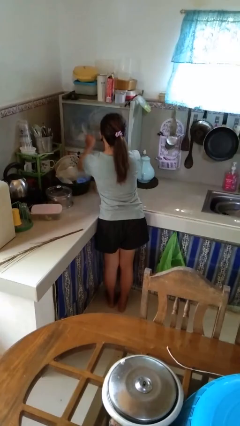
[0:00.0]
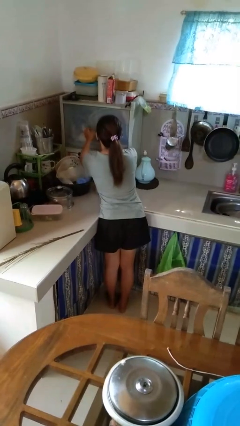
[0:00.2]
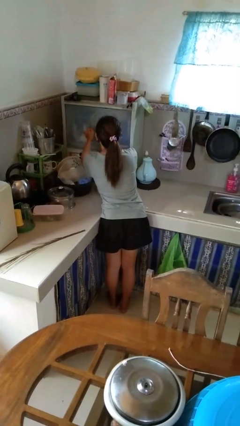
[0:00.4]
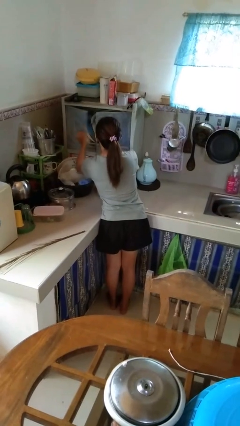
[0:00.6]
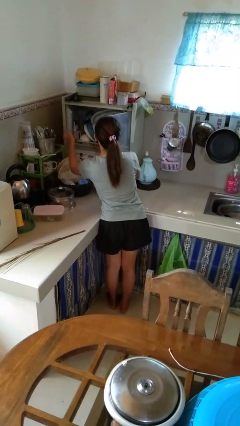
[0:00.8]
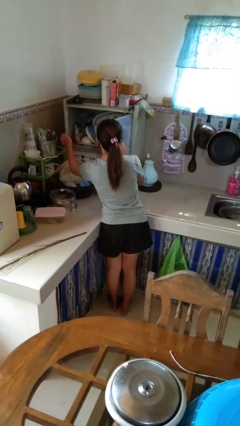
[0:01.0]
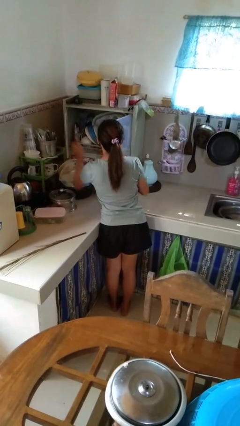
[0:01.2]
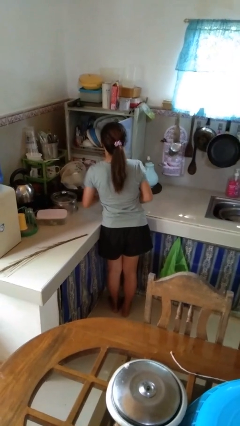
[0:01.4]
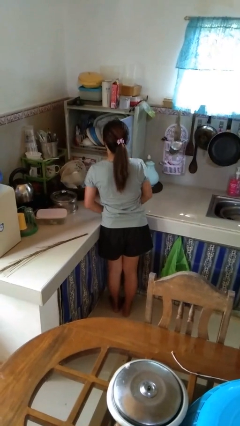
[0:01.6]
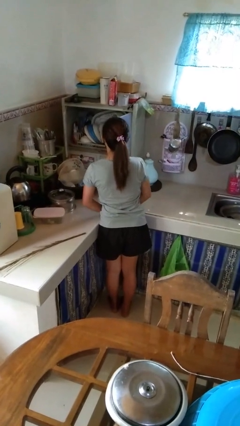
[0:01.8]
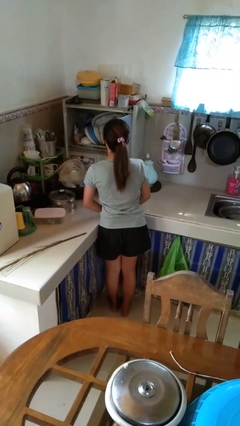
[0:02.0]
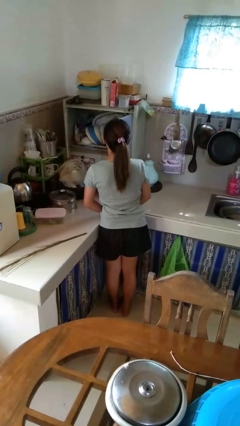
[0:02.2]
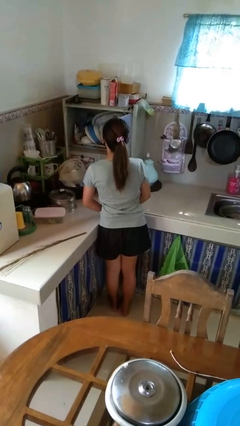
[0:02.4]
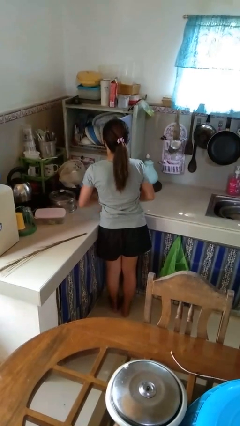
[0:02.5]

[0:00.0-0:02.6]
person opens kitchen drawer

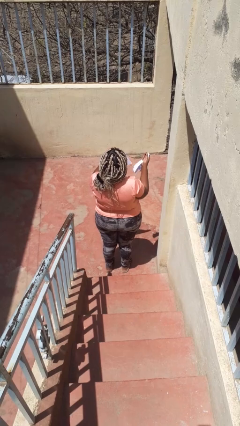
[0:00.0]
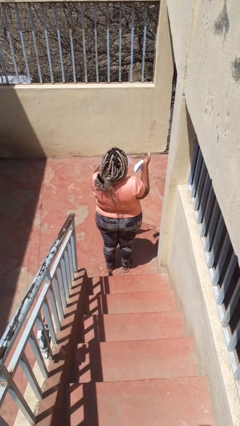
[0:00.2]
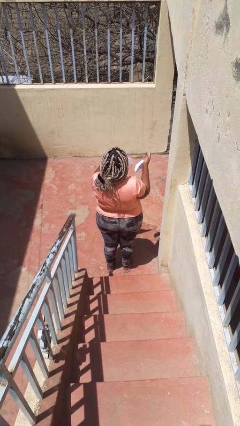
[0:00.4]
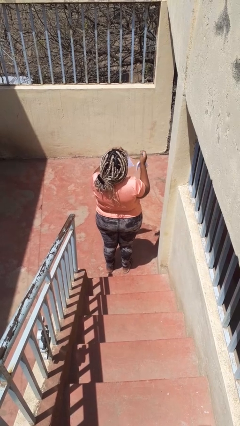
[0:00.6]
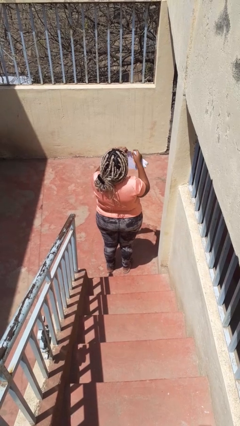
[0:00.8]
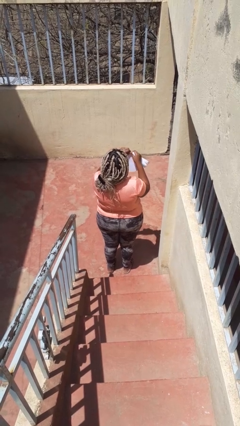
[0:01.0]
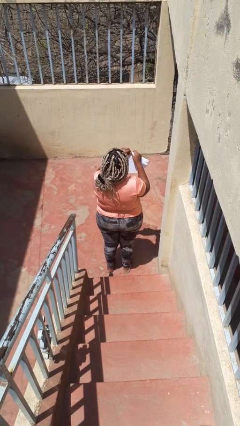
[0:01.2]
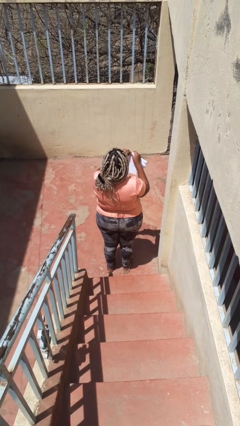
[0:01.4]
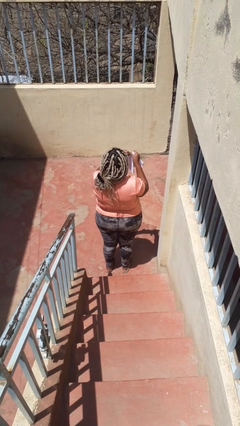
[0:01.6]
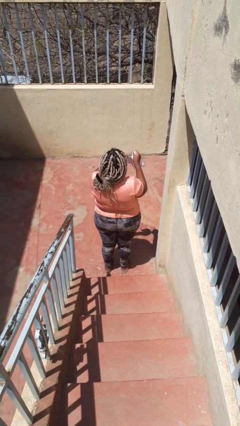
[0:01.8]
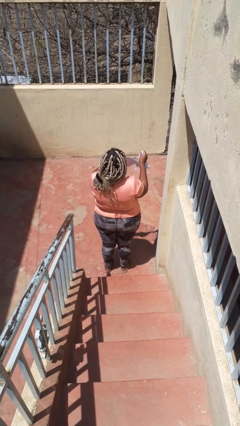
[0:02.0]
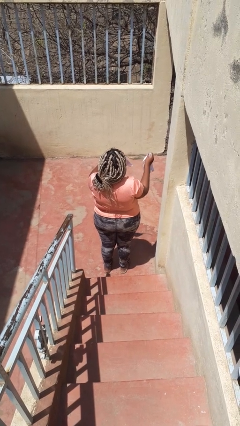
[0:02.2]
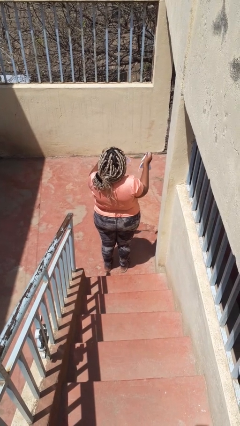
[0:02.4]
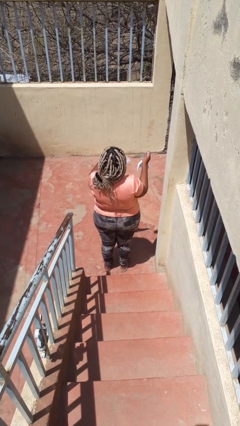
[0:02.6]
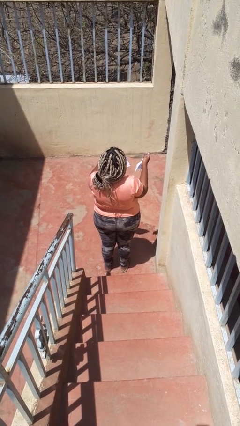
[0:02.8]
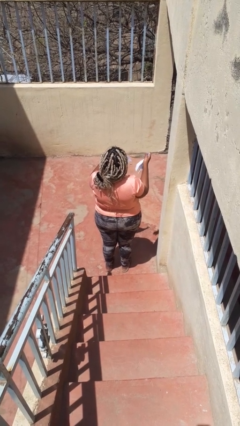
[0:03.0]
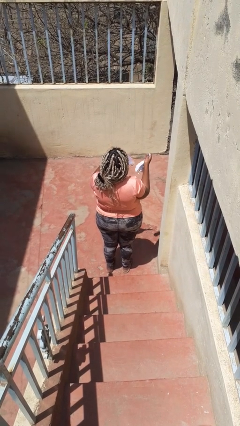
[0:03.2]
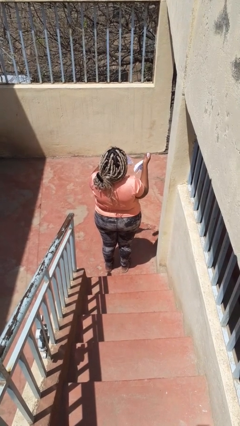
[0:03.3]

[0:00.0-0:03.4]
person tears paper

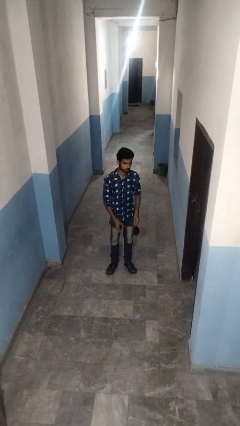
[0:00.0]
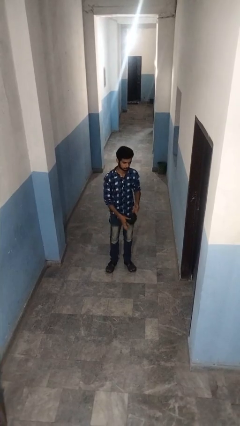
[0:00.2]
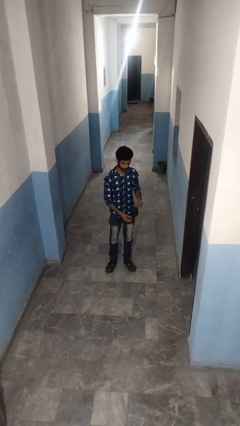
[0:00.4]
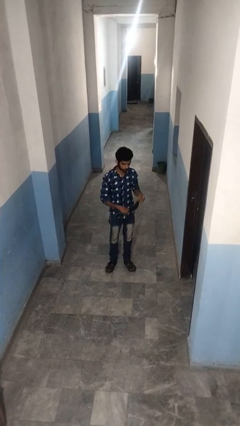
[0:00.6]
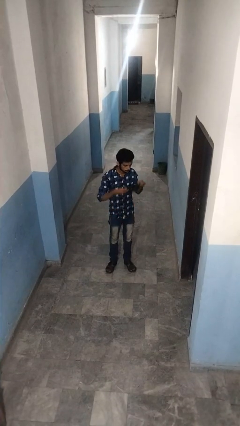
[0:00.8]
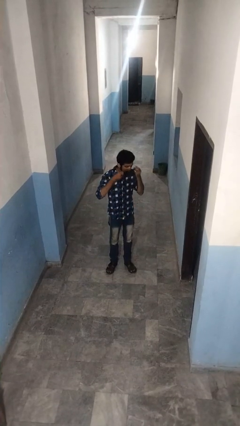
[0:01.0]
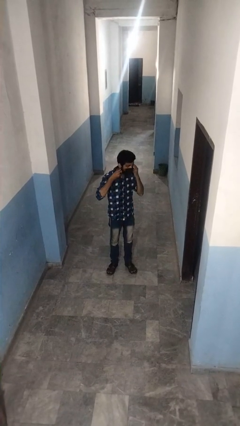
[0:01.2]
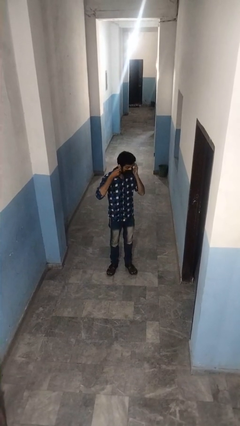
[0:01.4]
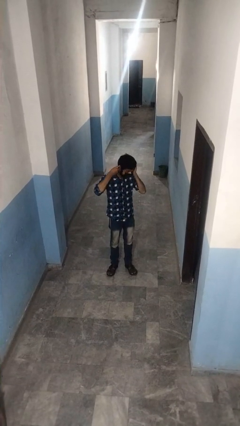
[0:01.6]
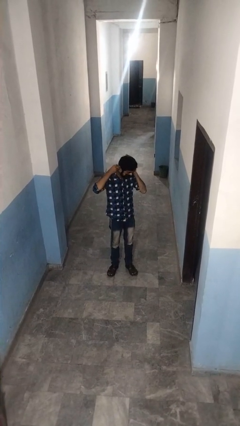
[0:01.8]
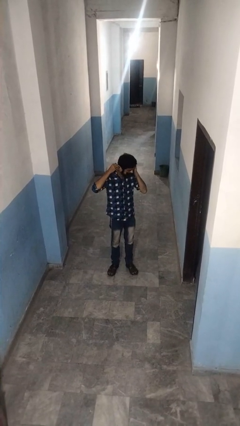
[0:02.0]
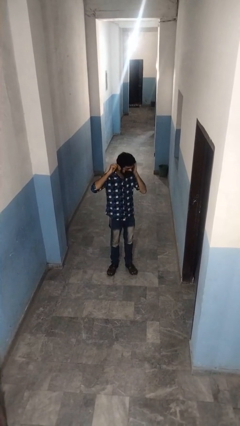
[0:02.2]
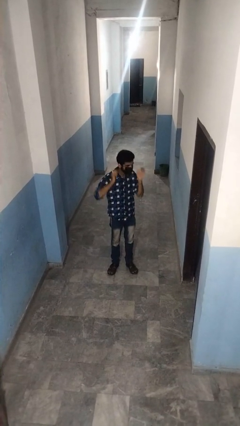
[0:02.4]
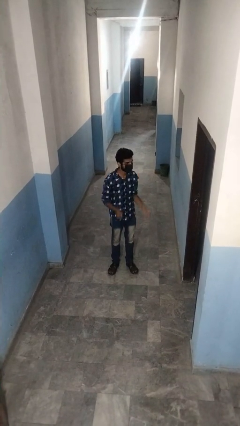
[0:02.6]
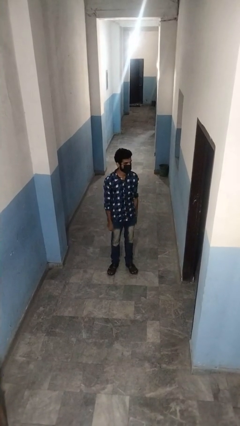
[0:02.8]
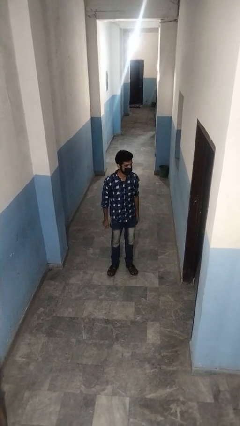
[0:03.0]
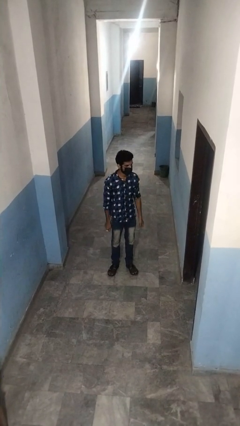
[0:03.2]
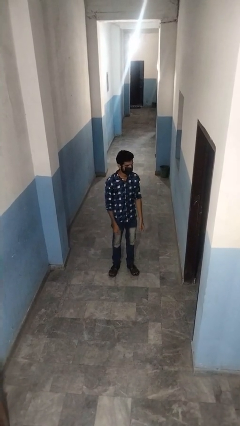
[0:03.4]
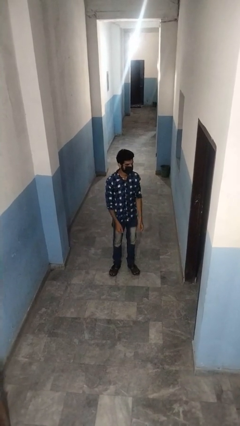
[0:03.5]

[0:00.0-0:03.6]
person puts on facemask

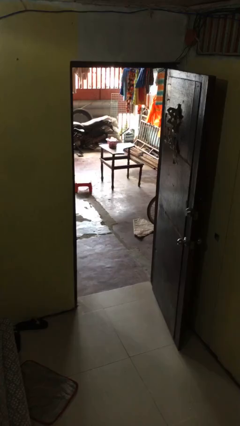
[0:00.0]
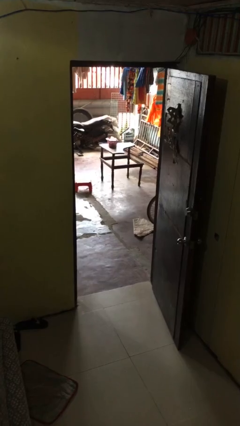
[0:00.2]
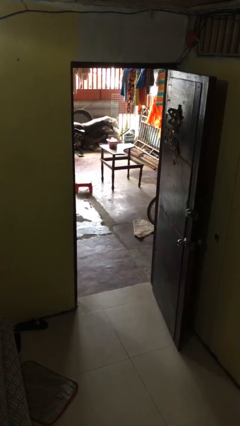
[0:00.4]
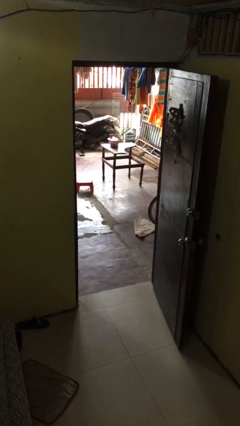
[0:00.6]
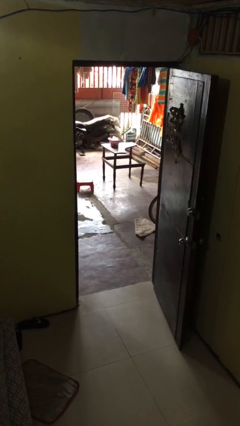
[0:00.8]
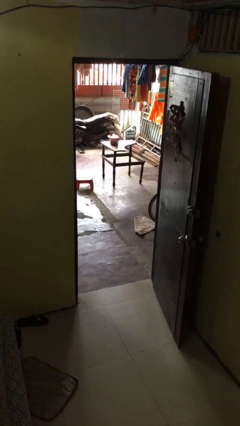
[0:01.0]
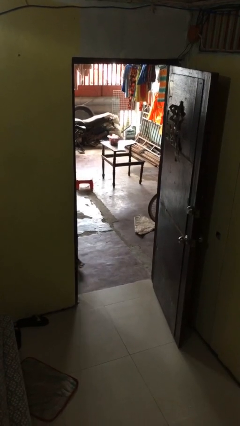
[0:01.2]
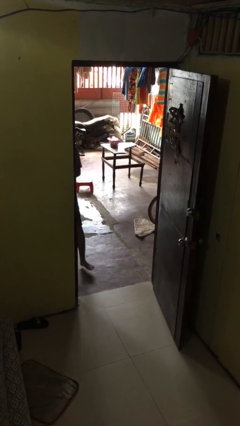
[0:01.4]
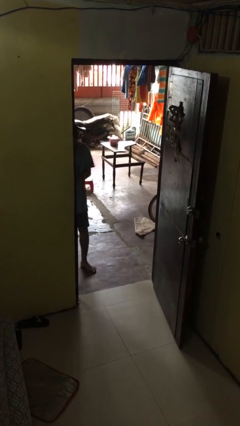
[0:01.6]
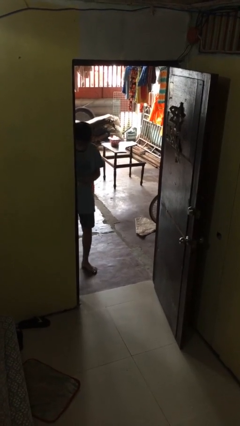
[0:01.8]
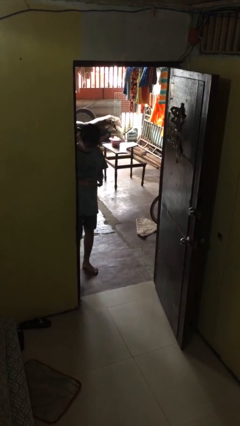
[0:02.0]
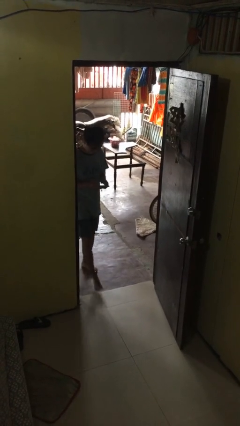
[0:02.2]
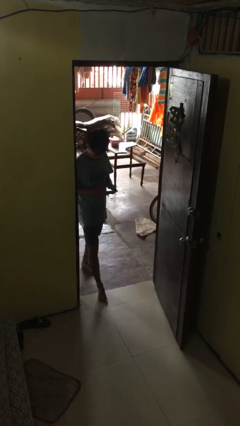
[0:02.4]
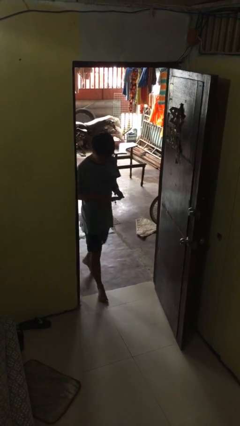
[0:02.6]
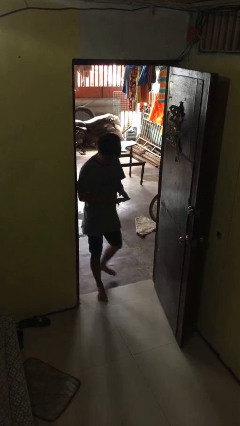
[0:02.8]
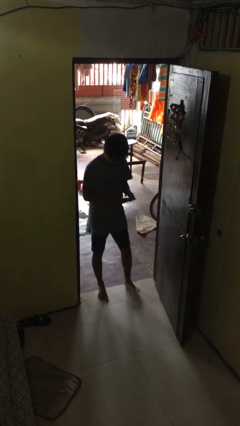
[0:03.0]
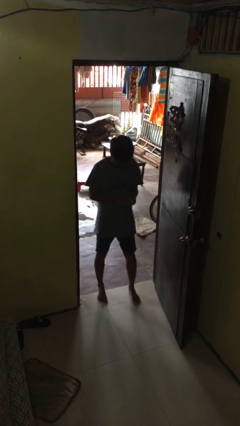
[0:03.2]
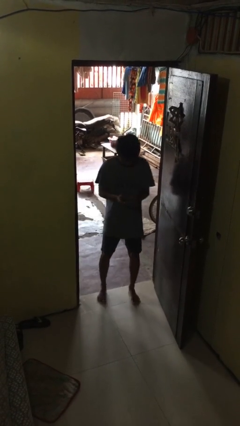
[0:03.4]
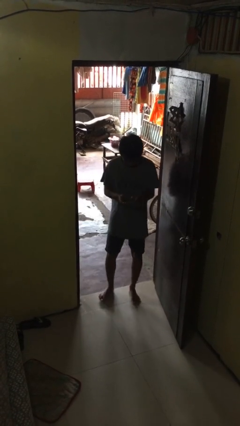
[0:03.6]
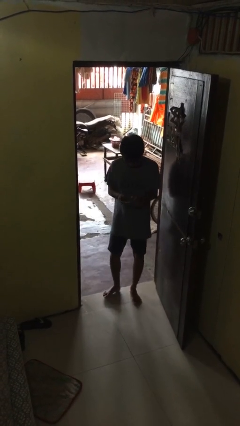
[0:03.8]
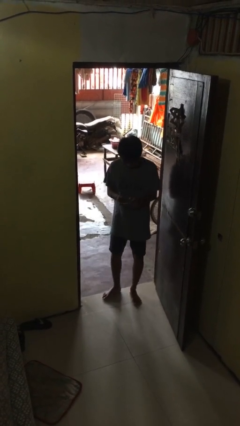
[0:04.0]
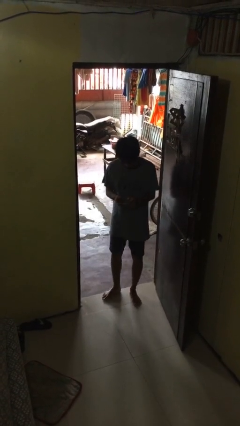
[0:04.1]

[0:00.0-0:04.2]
person enters scene through structure

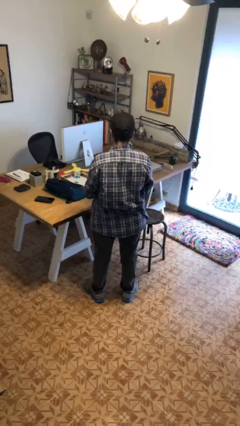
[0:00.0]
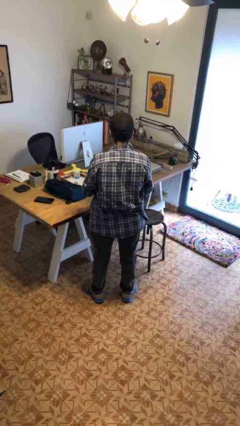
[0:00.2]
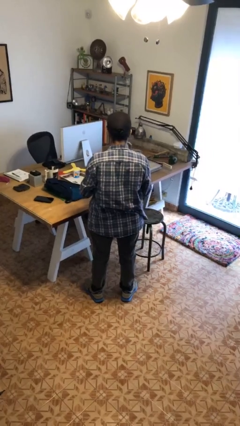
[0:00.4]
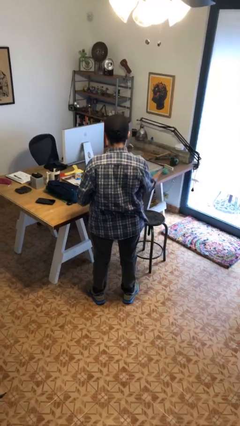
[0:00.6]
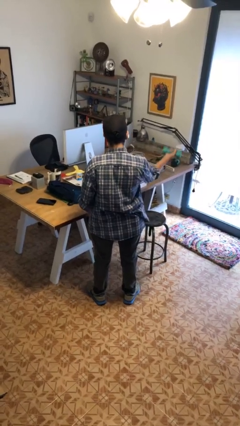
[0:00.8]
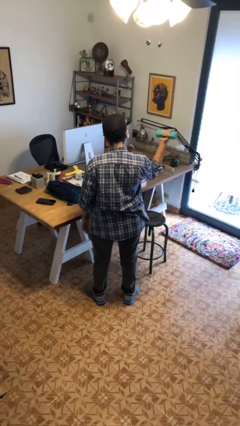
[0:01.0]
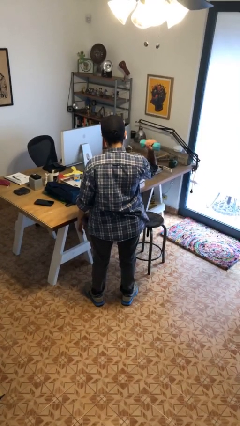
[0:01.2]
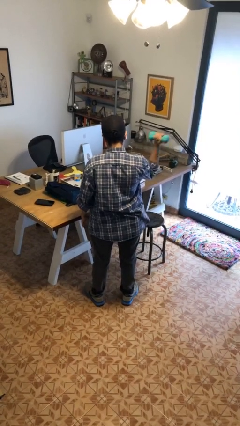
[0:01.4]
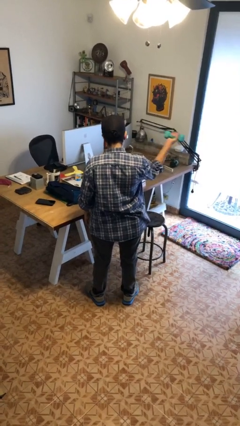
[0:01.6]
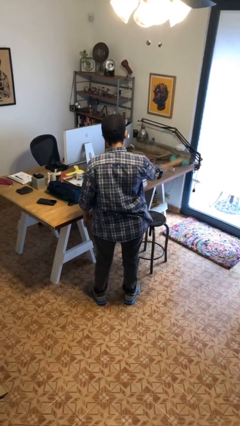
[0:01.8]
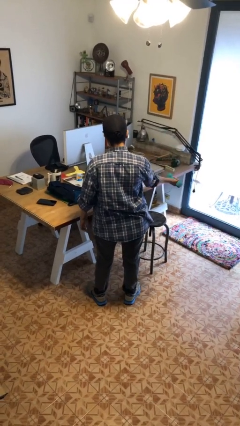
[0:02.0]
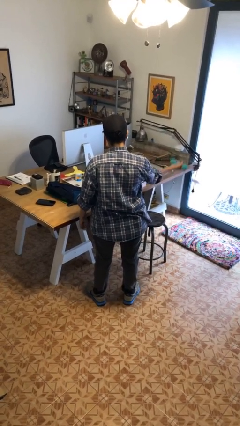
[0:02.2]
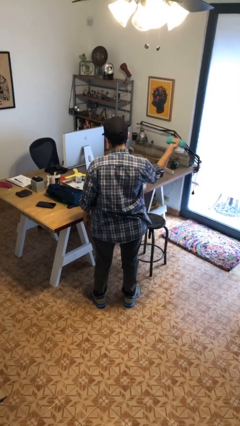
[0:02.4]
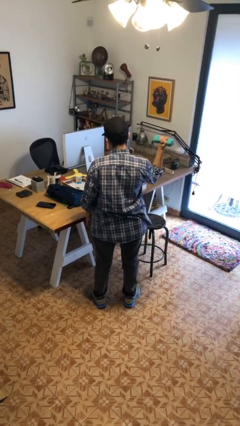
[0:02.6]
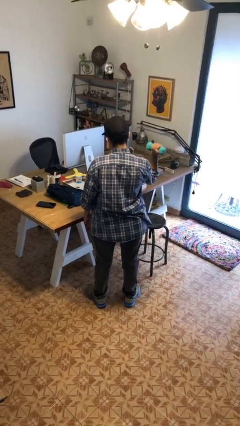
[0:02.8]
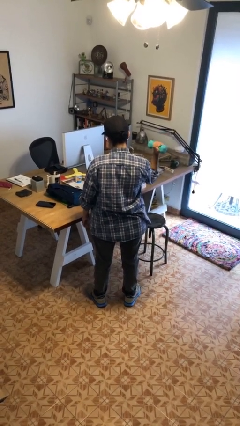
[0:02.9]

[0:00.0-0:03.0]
person lifts dumbbells

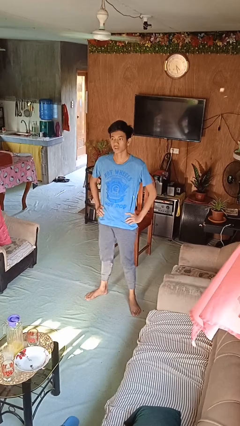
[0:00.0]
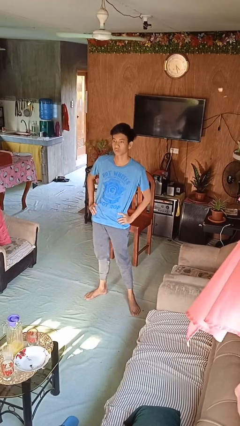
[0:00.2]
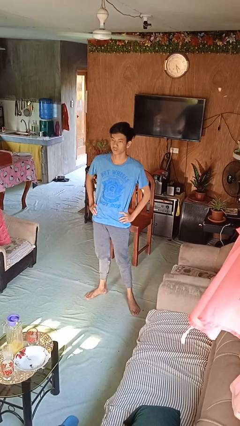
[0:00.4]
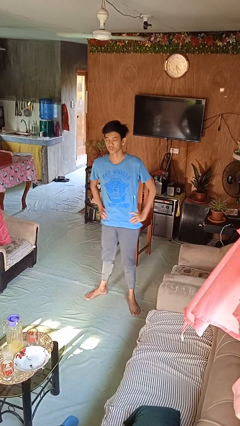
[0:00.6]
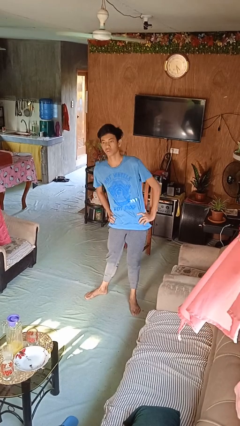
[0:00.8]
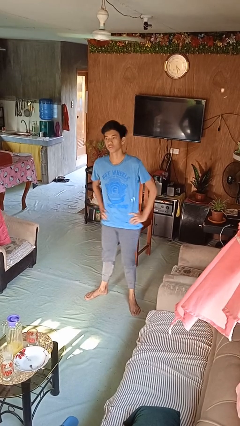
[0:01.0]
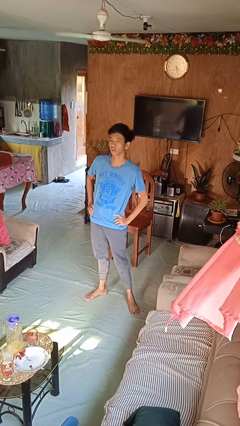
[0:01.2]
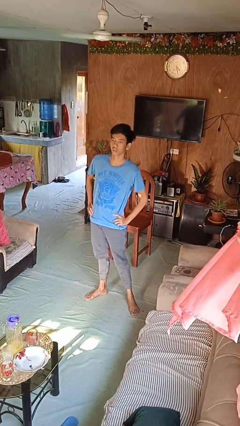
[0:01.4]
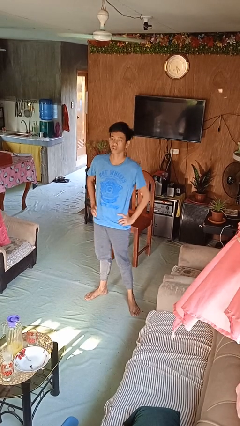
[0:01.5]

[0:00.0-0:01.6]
person wiggles hips
